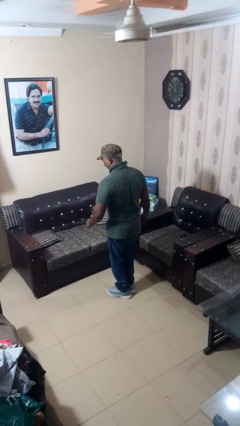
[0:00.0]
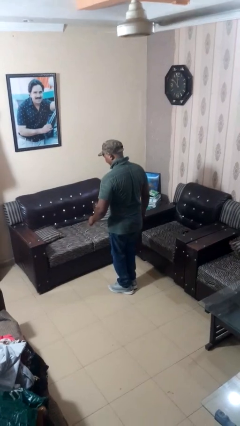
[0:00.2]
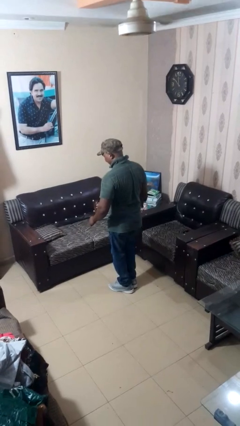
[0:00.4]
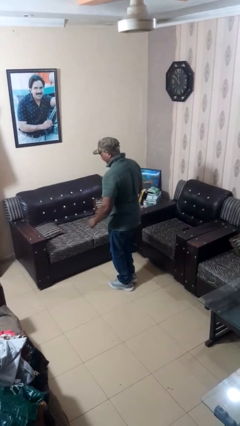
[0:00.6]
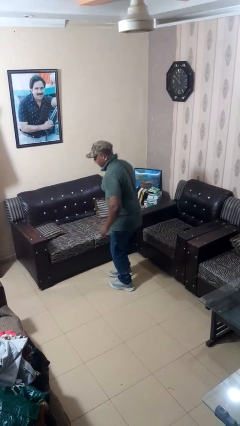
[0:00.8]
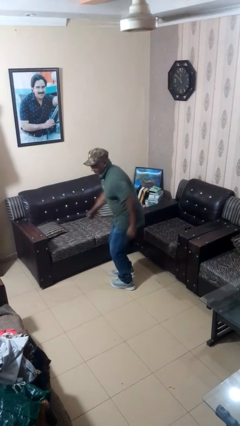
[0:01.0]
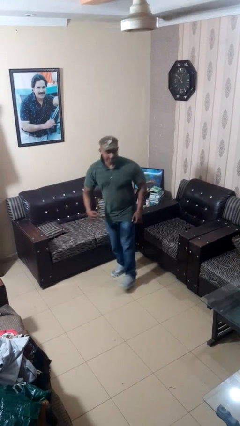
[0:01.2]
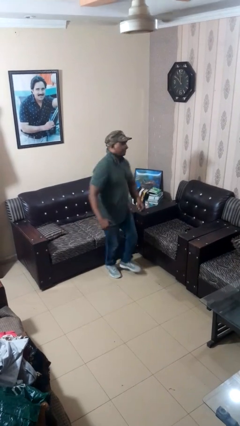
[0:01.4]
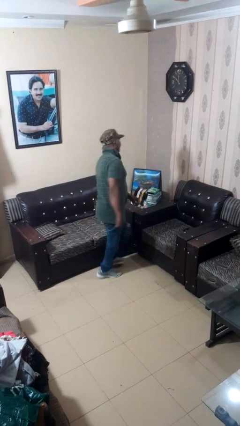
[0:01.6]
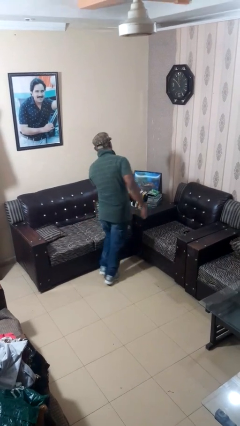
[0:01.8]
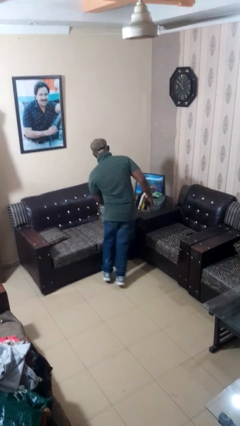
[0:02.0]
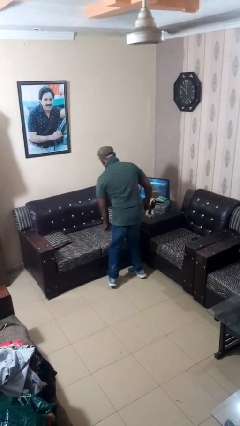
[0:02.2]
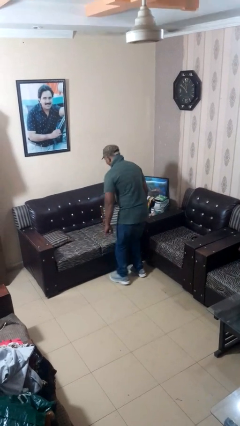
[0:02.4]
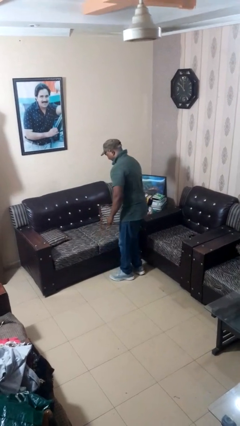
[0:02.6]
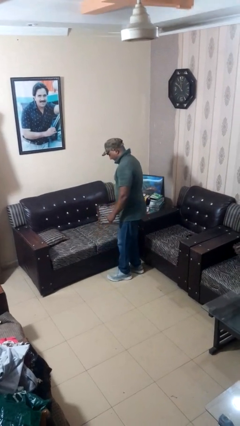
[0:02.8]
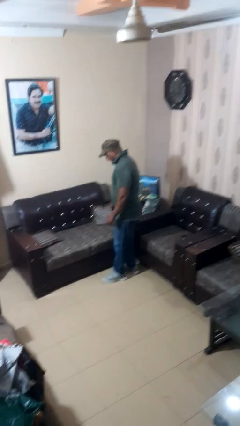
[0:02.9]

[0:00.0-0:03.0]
person twirls

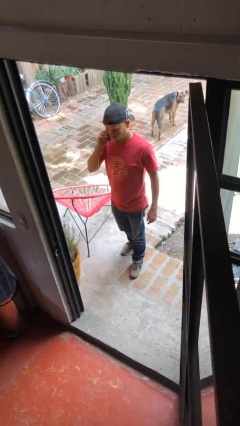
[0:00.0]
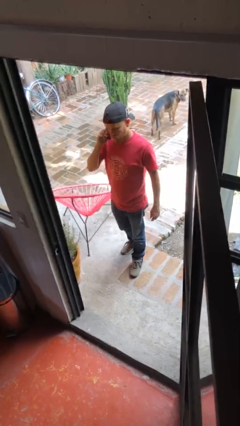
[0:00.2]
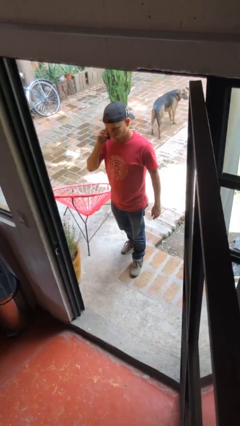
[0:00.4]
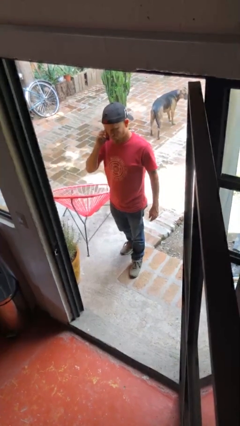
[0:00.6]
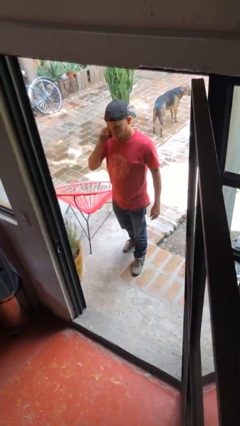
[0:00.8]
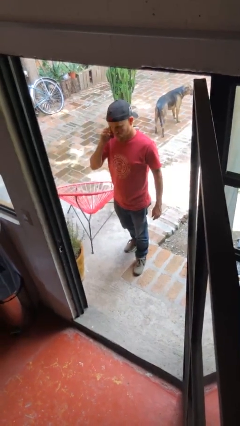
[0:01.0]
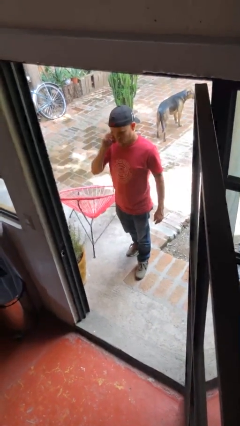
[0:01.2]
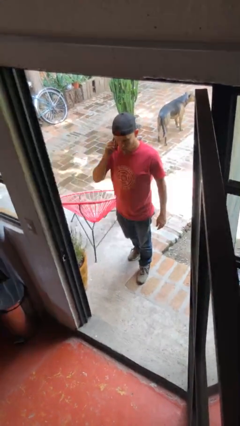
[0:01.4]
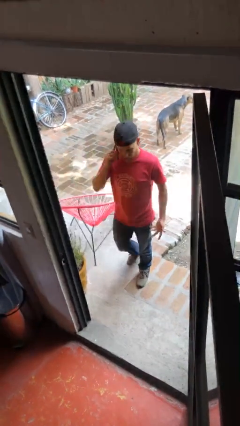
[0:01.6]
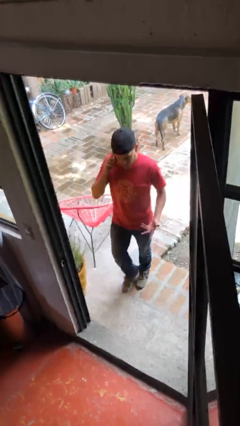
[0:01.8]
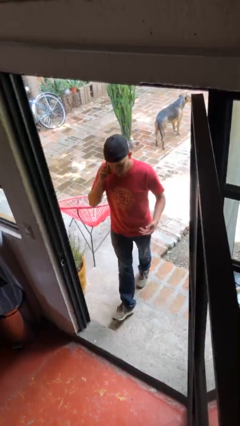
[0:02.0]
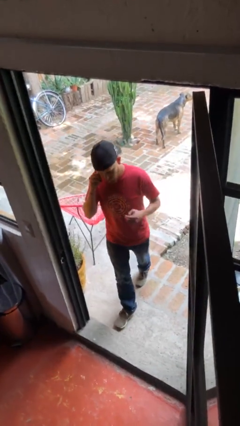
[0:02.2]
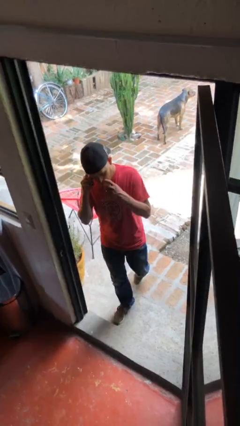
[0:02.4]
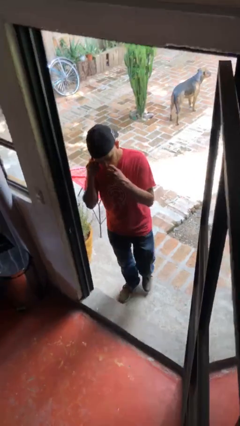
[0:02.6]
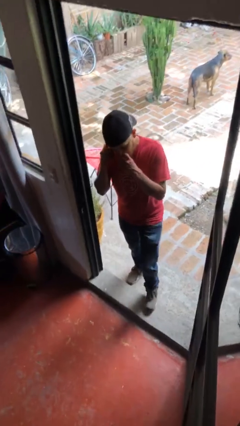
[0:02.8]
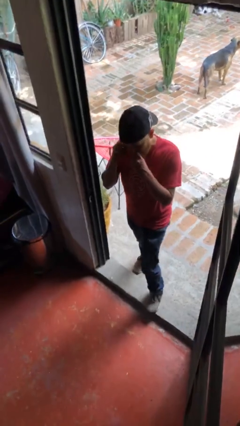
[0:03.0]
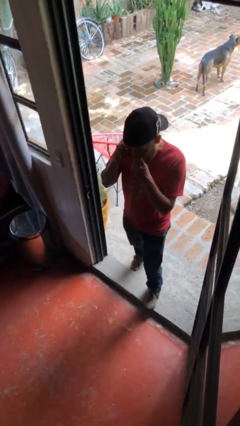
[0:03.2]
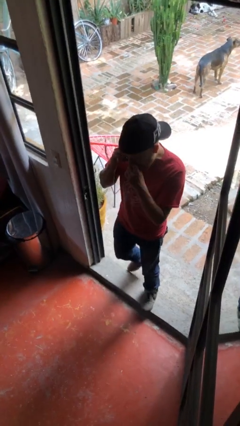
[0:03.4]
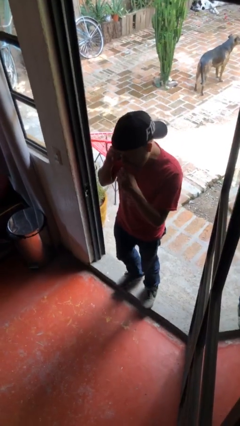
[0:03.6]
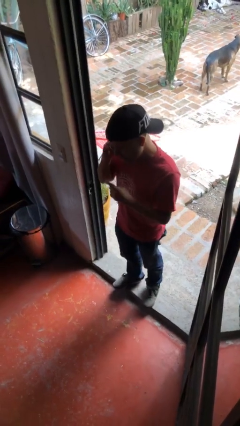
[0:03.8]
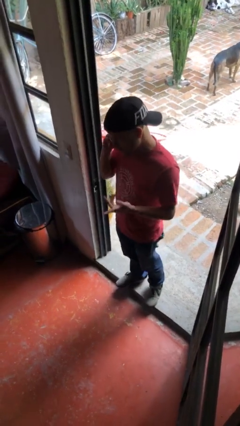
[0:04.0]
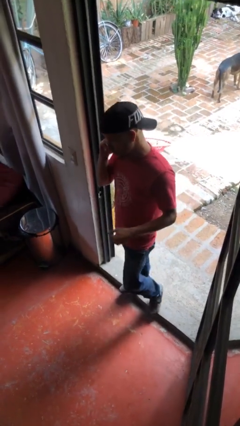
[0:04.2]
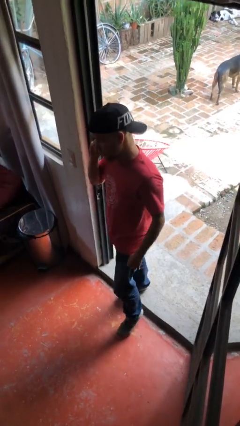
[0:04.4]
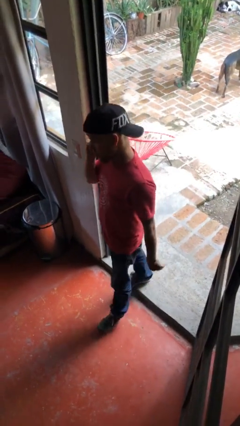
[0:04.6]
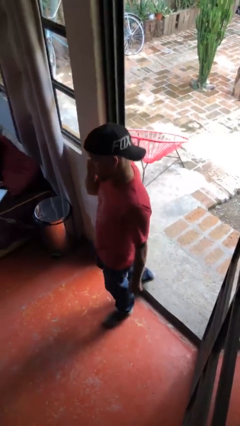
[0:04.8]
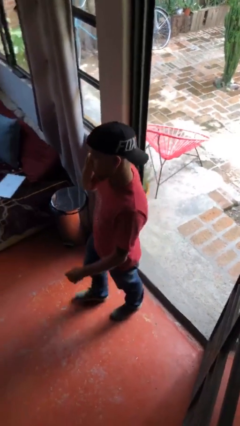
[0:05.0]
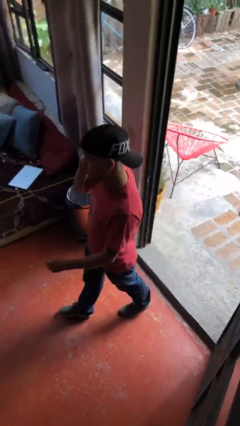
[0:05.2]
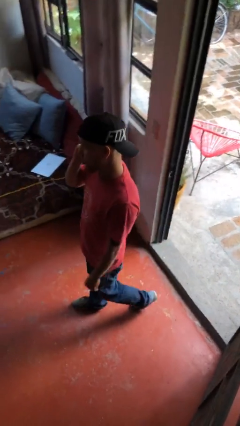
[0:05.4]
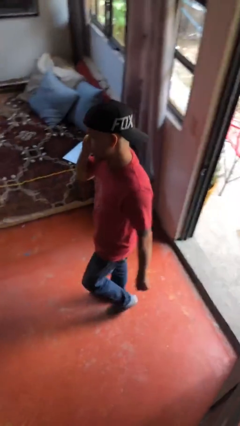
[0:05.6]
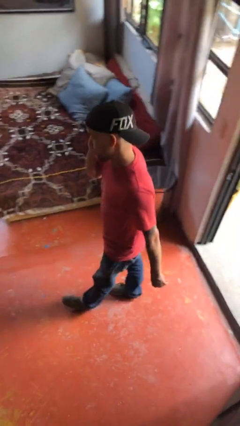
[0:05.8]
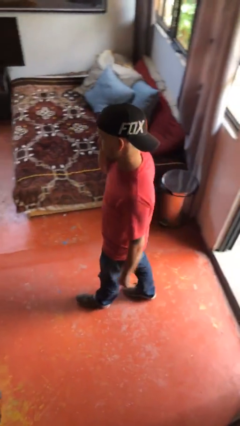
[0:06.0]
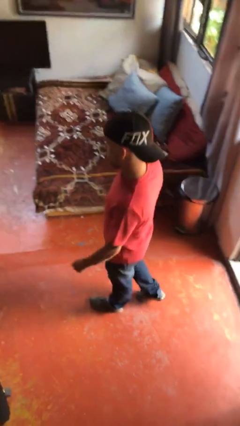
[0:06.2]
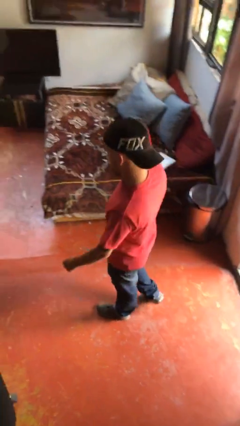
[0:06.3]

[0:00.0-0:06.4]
person enters scene through structure

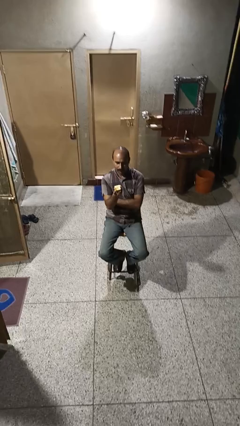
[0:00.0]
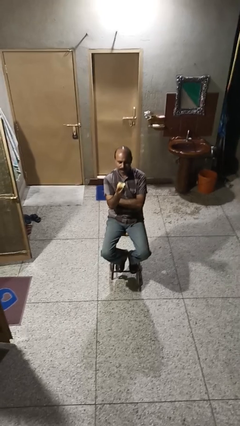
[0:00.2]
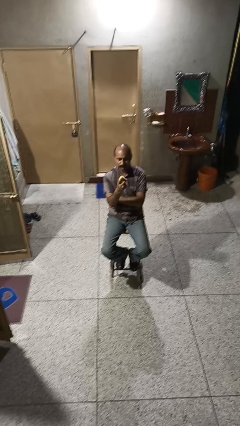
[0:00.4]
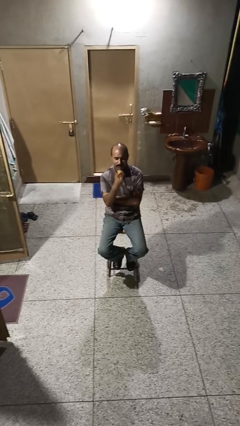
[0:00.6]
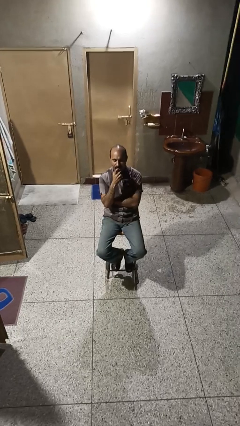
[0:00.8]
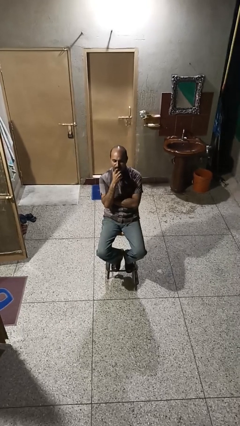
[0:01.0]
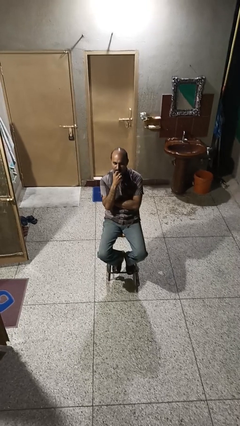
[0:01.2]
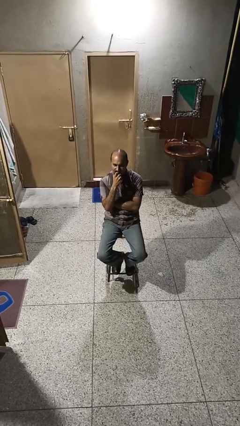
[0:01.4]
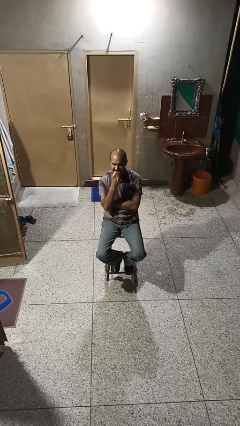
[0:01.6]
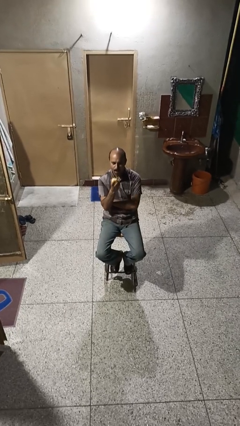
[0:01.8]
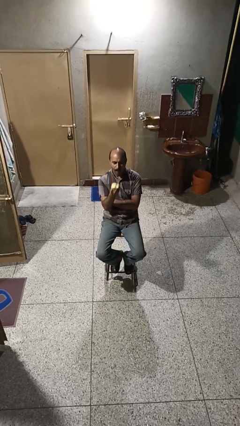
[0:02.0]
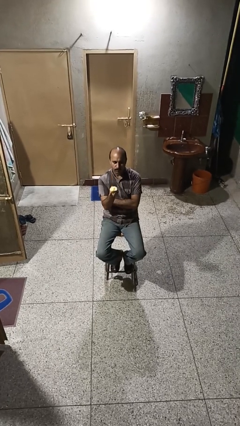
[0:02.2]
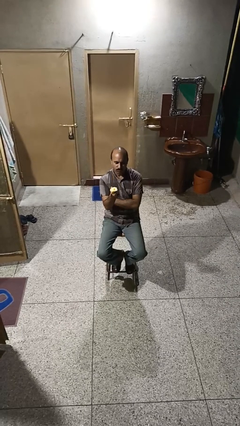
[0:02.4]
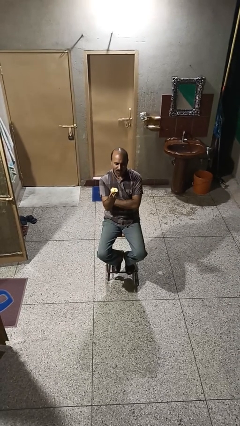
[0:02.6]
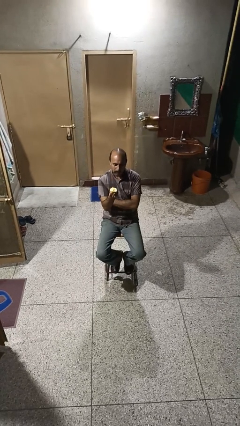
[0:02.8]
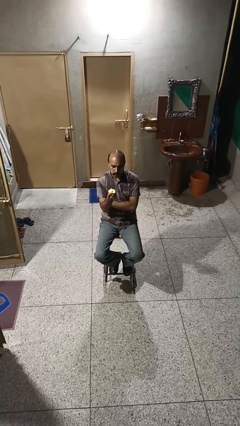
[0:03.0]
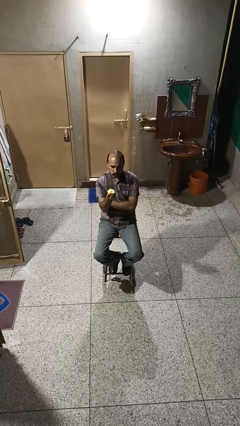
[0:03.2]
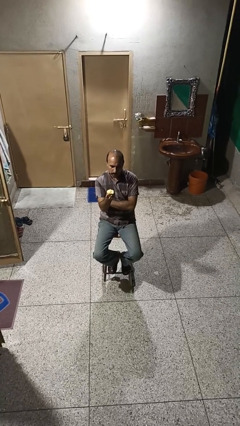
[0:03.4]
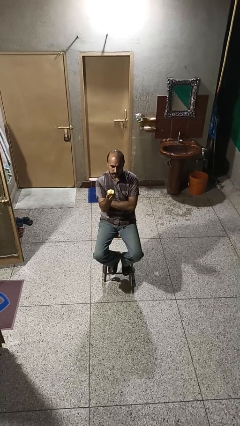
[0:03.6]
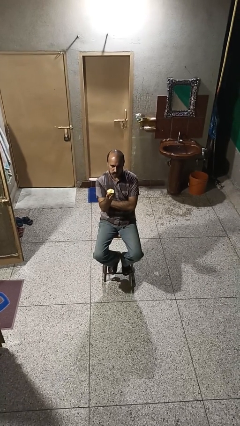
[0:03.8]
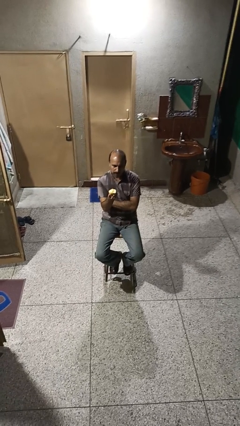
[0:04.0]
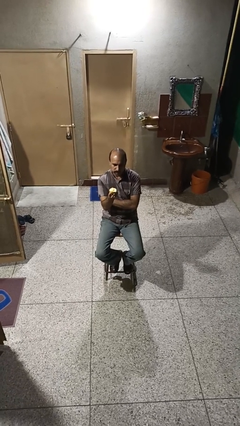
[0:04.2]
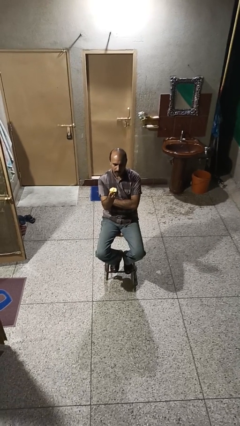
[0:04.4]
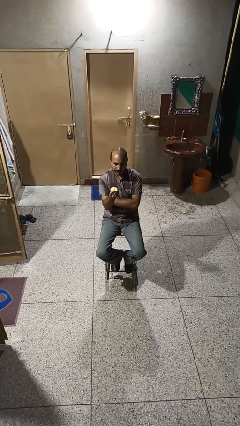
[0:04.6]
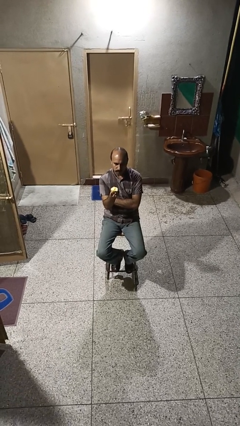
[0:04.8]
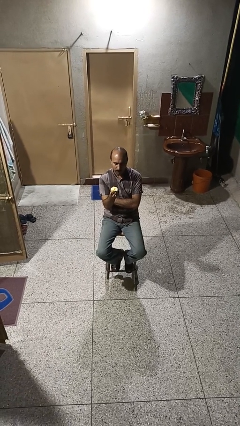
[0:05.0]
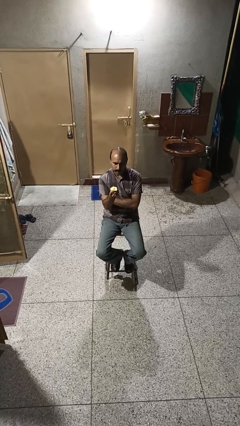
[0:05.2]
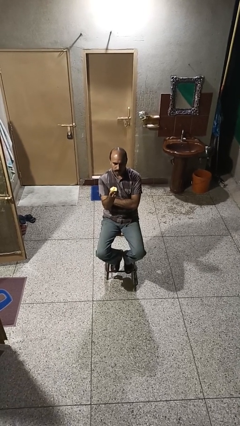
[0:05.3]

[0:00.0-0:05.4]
person eats apple

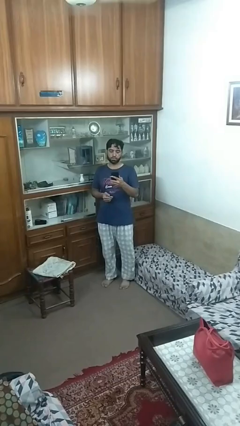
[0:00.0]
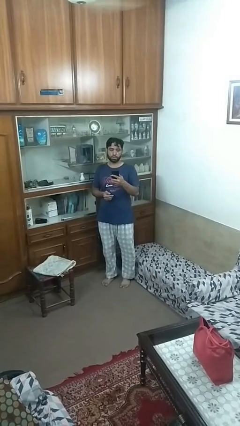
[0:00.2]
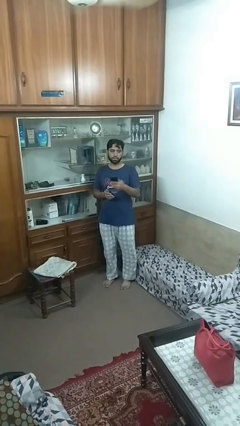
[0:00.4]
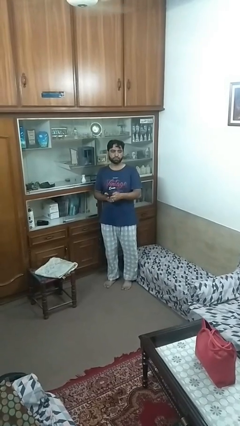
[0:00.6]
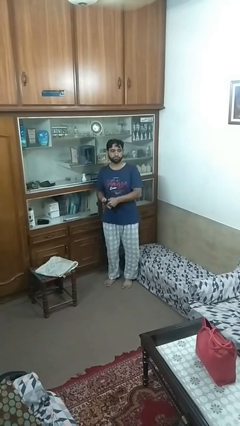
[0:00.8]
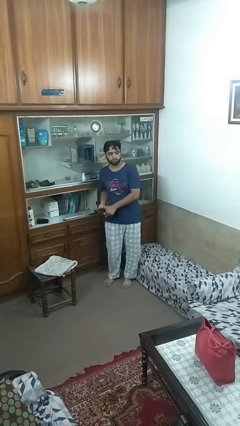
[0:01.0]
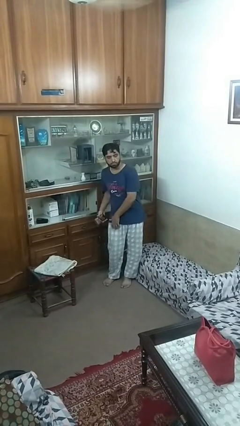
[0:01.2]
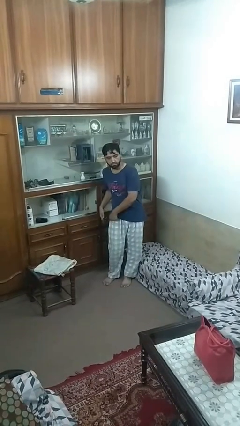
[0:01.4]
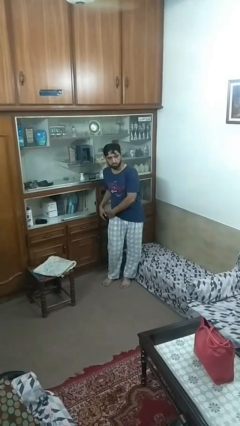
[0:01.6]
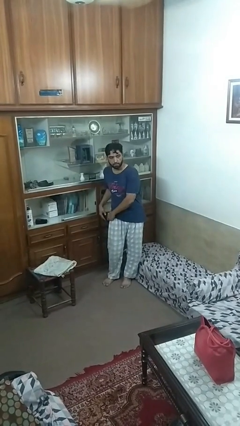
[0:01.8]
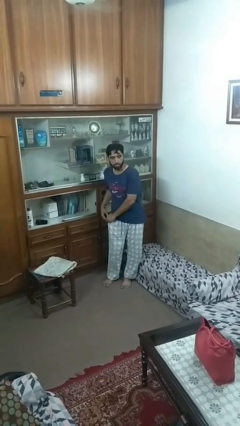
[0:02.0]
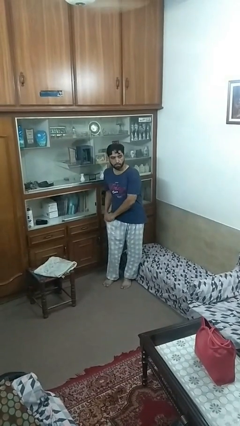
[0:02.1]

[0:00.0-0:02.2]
person puts phone into pocket

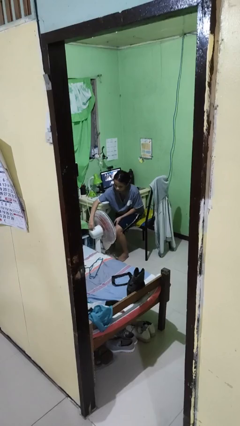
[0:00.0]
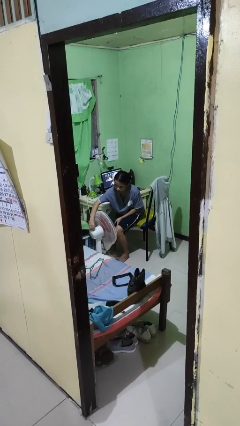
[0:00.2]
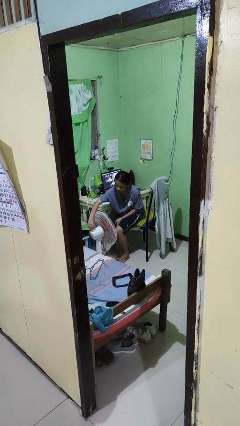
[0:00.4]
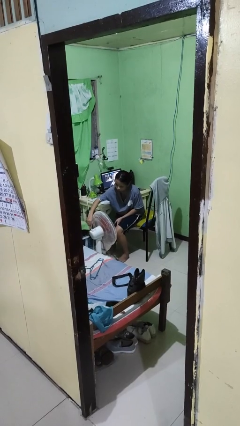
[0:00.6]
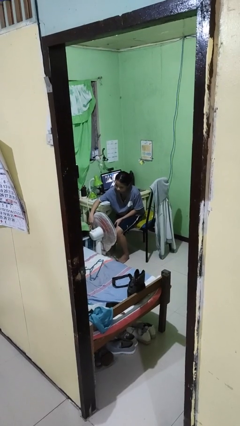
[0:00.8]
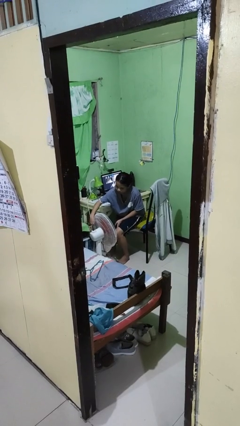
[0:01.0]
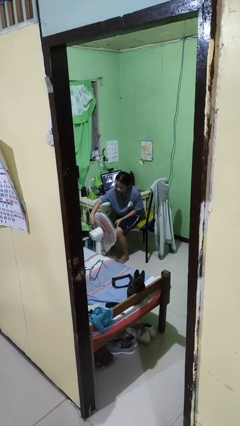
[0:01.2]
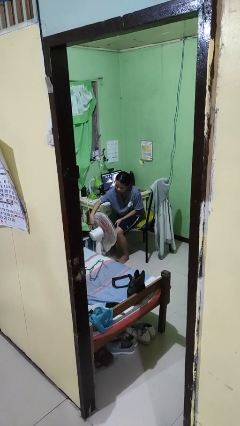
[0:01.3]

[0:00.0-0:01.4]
person turns off fan
